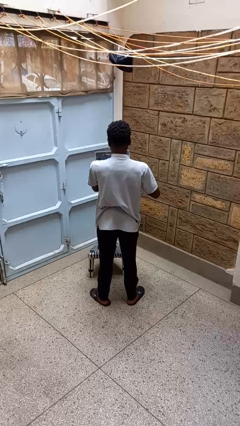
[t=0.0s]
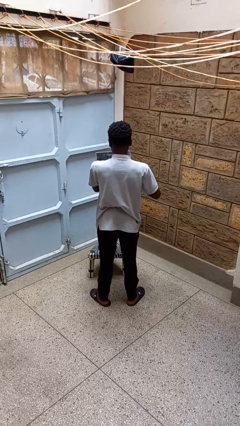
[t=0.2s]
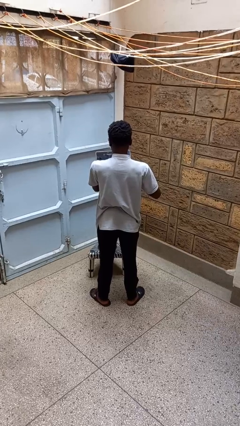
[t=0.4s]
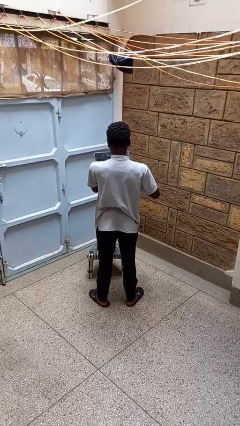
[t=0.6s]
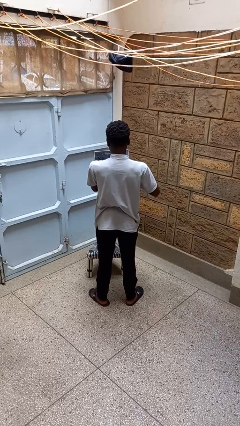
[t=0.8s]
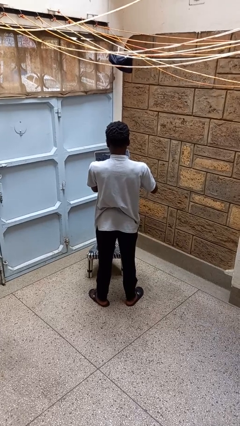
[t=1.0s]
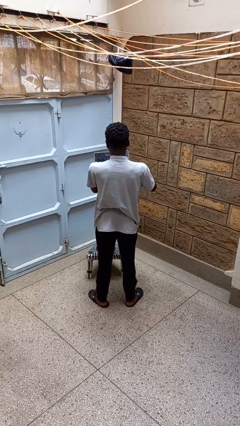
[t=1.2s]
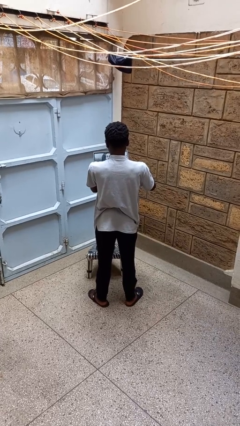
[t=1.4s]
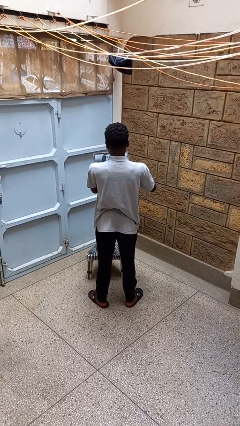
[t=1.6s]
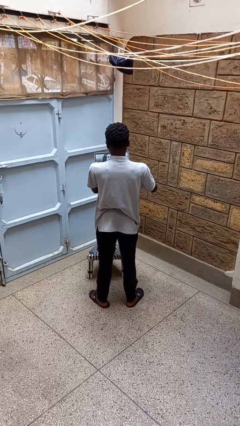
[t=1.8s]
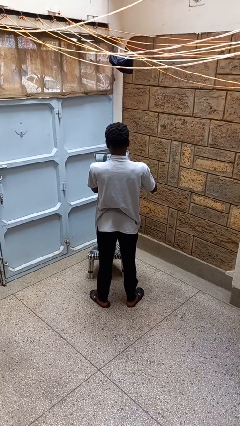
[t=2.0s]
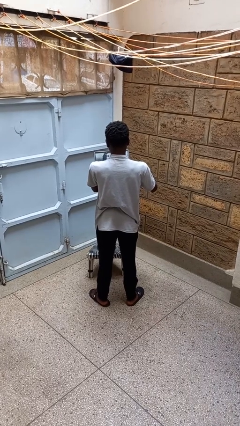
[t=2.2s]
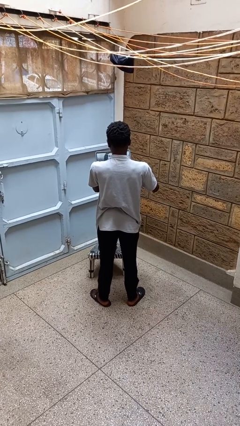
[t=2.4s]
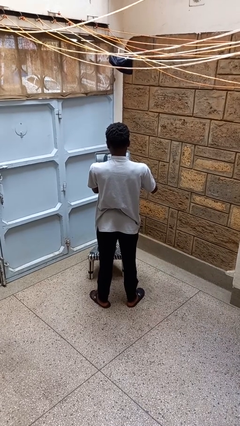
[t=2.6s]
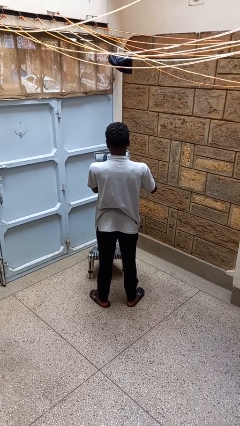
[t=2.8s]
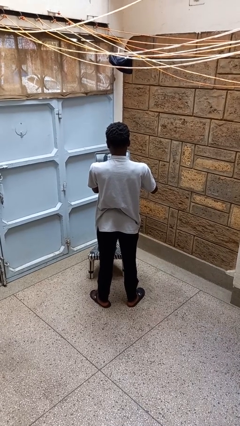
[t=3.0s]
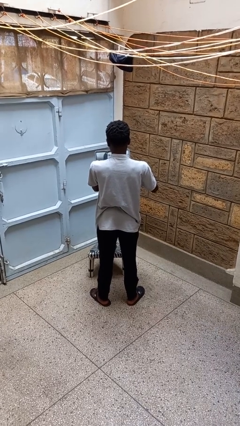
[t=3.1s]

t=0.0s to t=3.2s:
person interacts with tablet

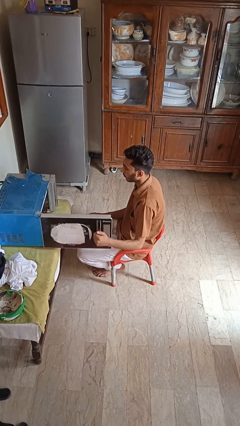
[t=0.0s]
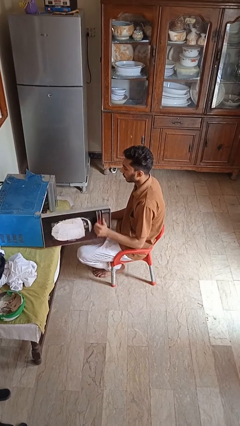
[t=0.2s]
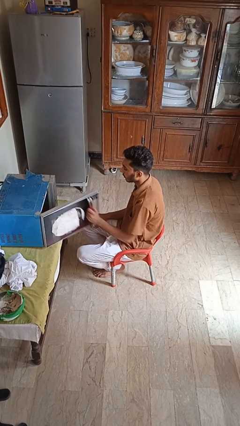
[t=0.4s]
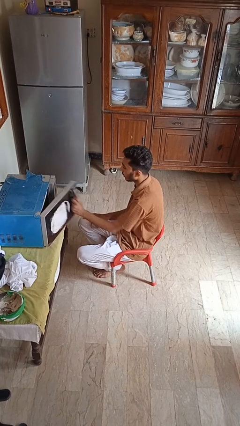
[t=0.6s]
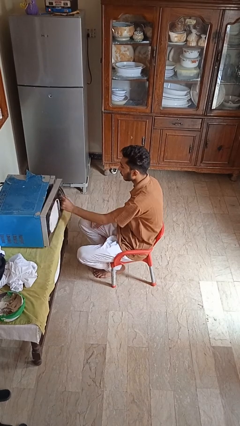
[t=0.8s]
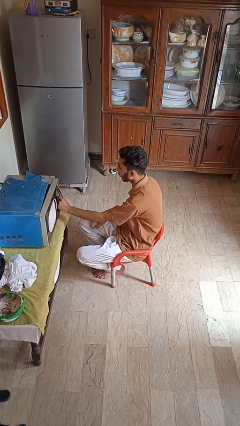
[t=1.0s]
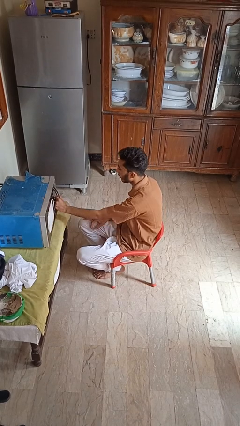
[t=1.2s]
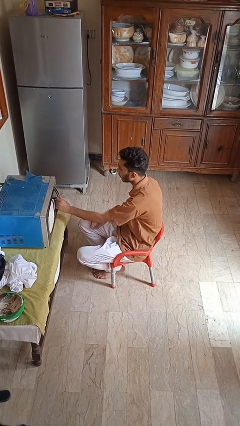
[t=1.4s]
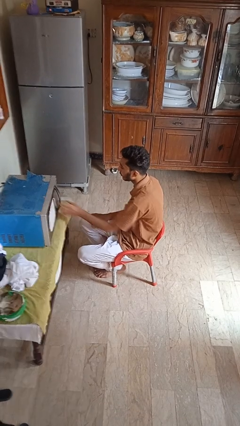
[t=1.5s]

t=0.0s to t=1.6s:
person closes microwave

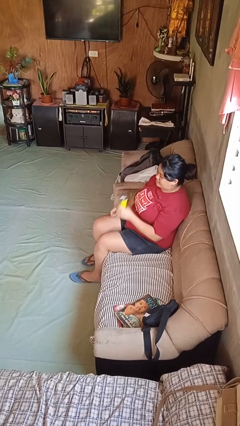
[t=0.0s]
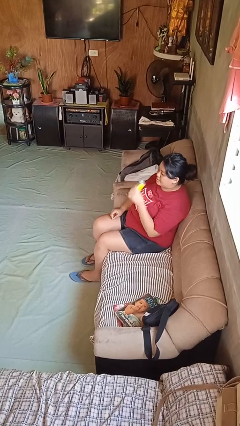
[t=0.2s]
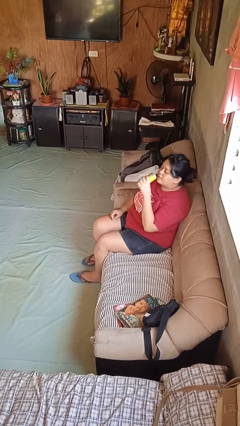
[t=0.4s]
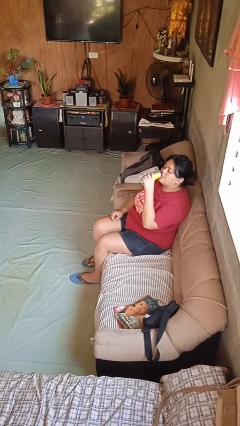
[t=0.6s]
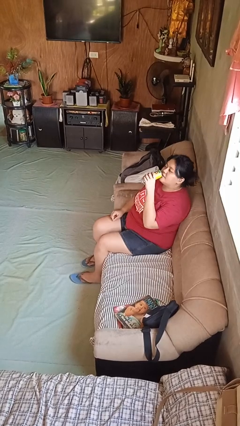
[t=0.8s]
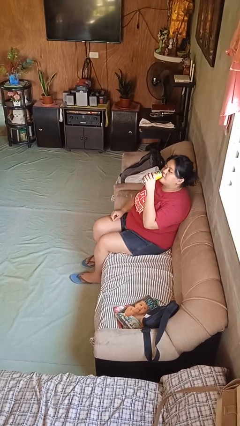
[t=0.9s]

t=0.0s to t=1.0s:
person drinks from beverage can

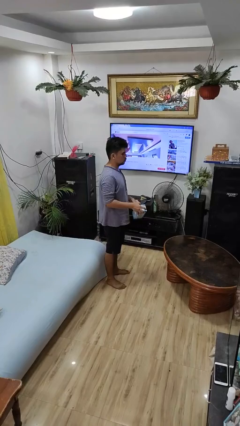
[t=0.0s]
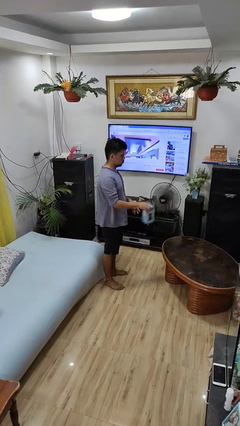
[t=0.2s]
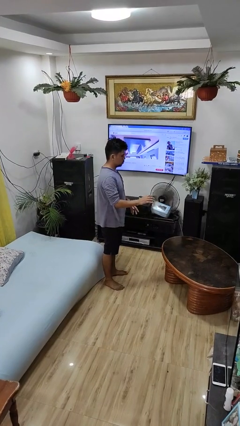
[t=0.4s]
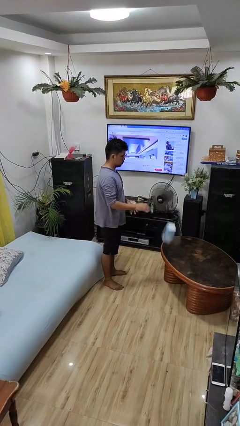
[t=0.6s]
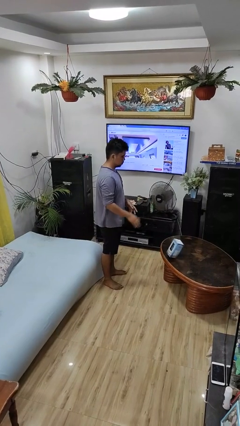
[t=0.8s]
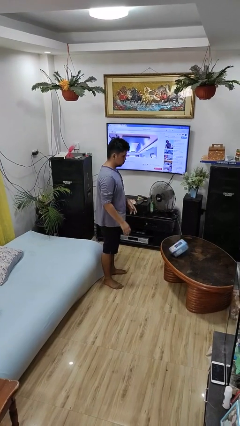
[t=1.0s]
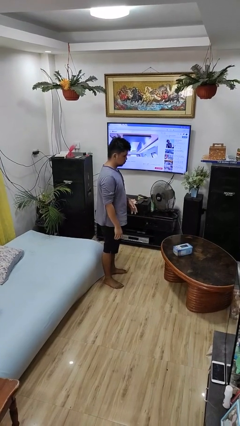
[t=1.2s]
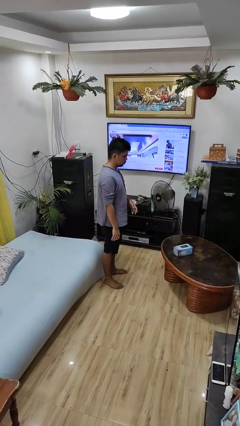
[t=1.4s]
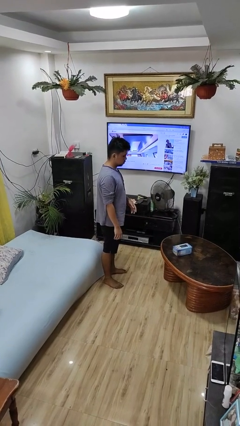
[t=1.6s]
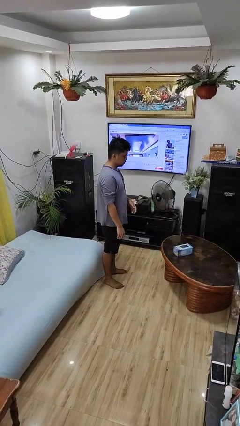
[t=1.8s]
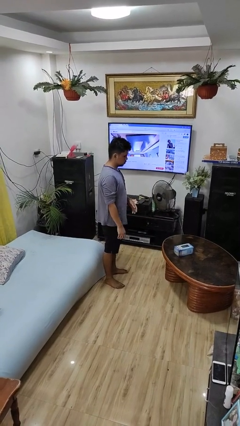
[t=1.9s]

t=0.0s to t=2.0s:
person throws object on table

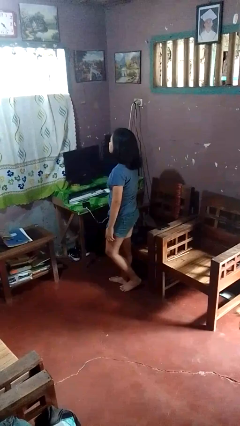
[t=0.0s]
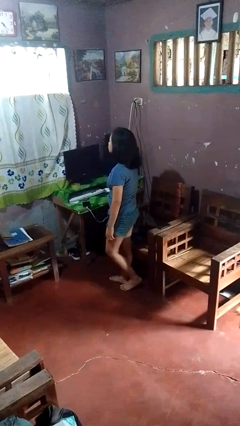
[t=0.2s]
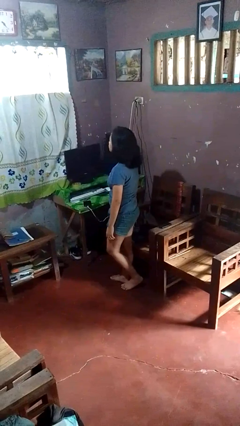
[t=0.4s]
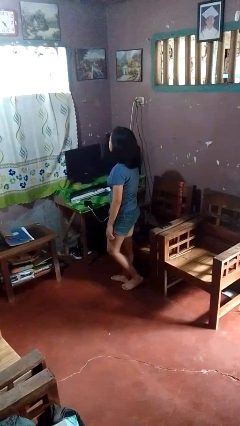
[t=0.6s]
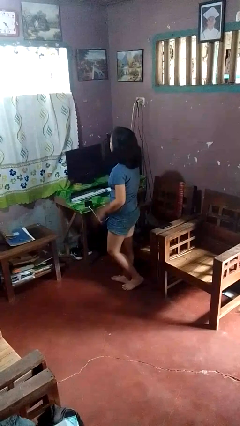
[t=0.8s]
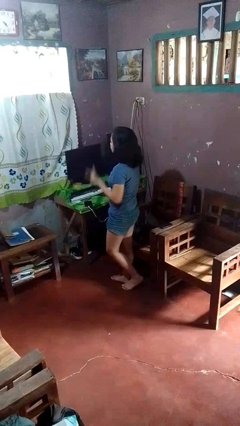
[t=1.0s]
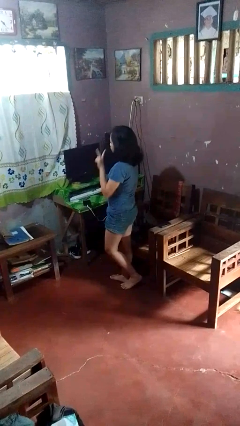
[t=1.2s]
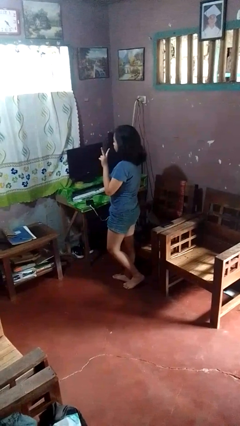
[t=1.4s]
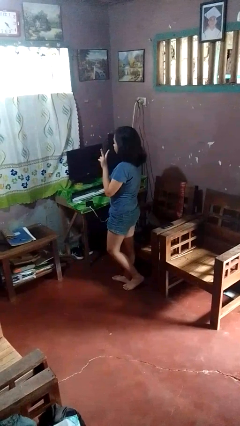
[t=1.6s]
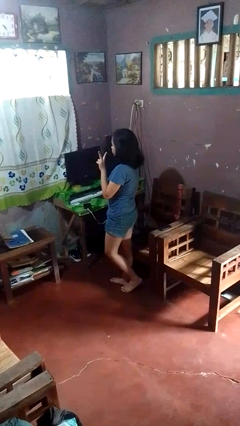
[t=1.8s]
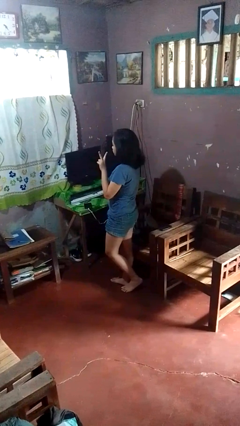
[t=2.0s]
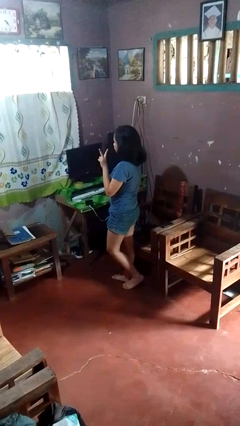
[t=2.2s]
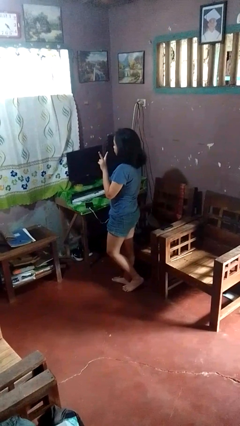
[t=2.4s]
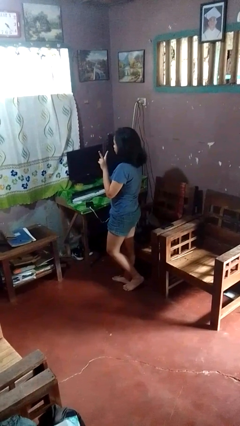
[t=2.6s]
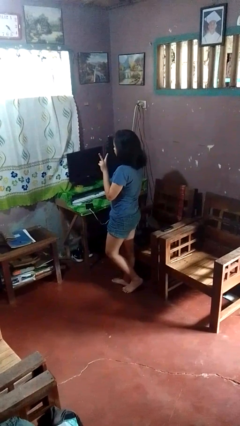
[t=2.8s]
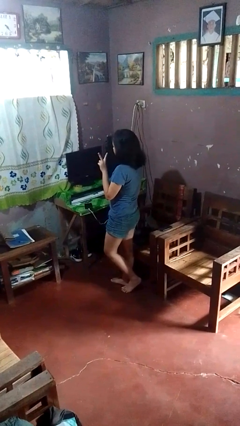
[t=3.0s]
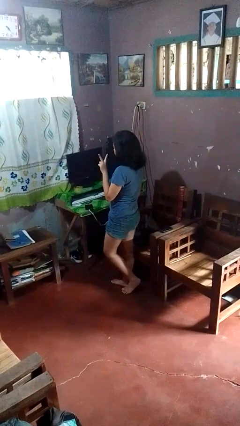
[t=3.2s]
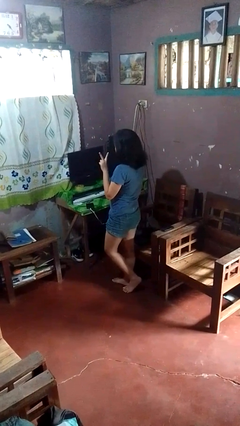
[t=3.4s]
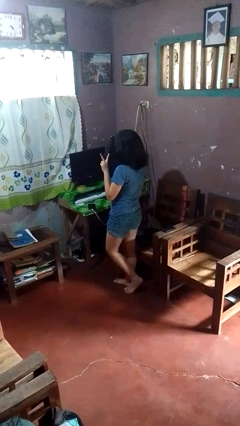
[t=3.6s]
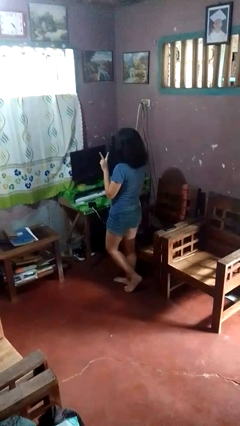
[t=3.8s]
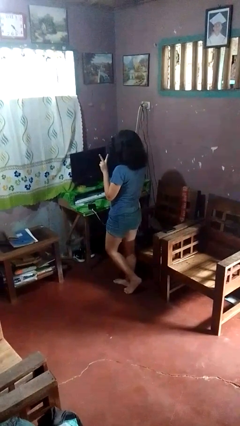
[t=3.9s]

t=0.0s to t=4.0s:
person gestures peace

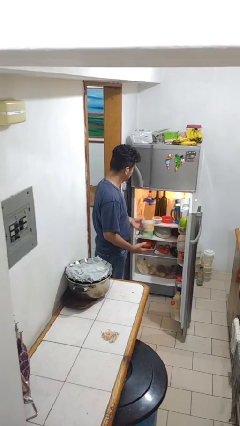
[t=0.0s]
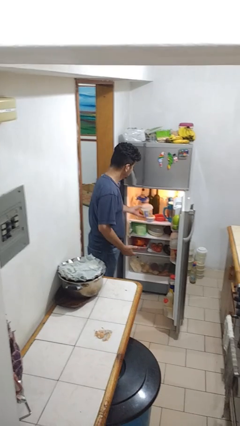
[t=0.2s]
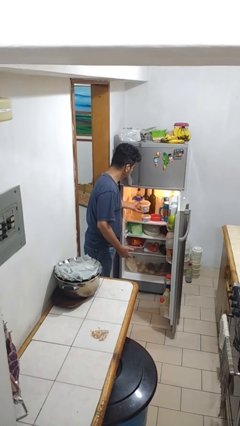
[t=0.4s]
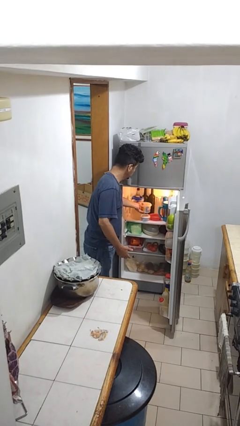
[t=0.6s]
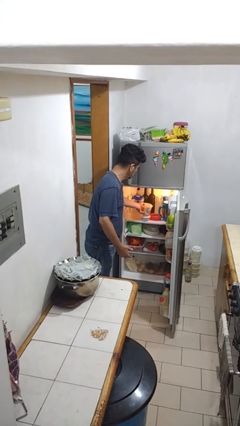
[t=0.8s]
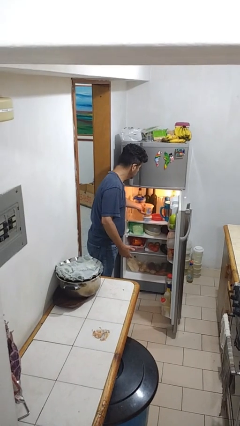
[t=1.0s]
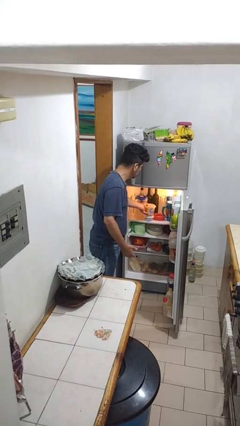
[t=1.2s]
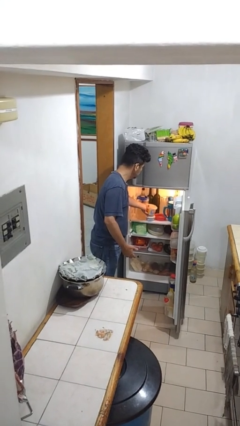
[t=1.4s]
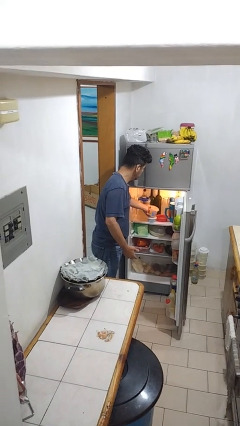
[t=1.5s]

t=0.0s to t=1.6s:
person puts object into refrigerator

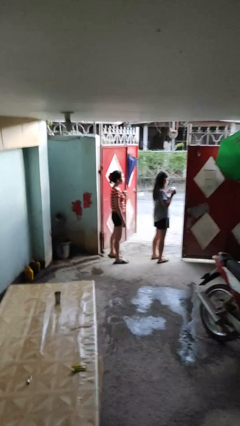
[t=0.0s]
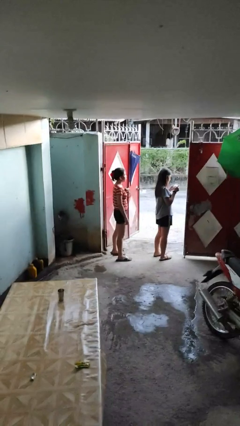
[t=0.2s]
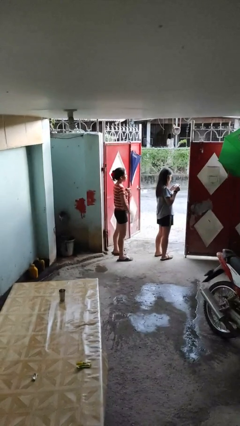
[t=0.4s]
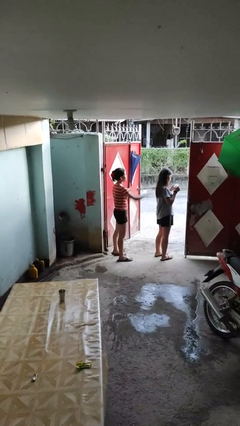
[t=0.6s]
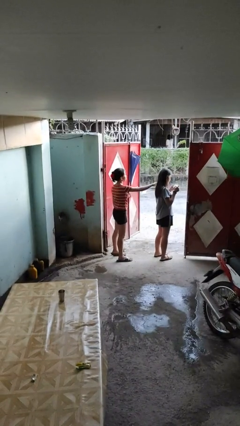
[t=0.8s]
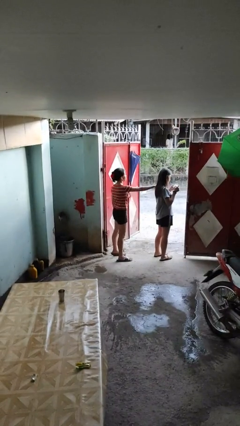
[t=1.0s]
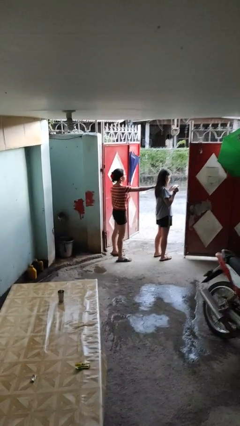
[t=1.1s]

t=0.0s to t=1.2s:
person grabs person by shoulder

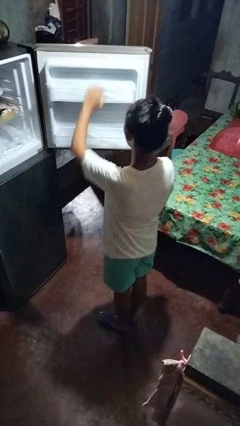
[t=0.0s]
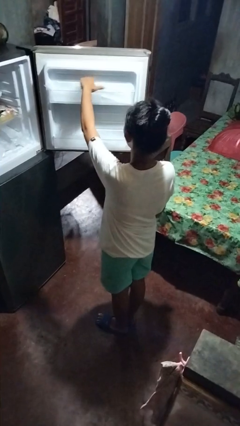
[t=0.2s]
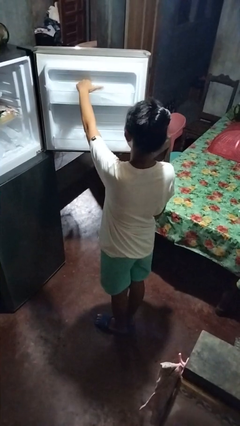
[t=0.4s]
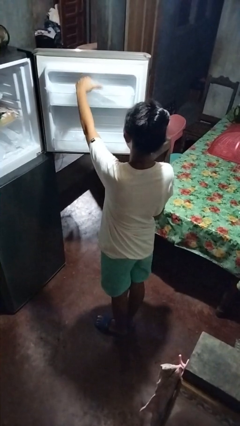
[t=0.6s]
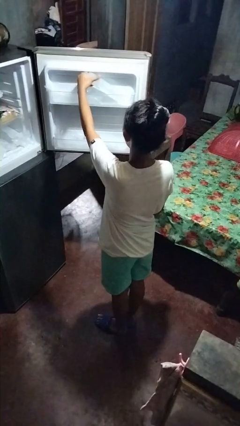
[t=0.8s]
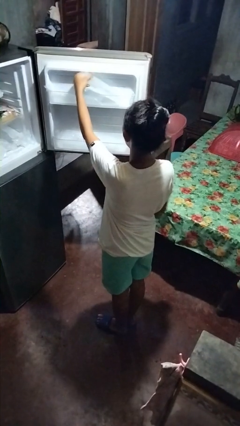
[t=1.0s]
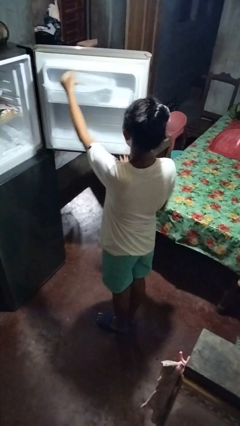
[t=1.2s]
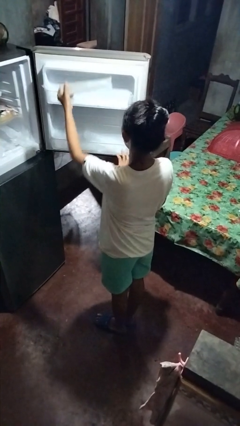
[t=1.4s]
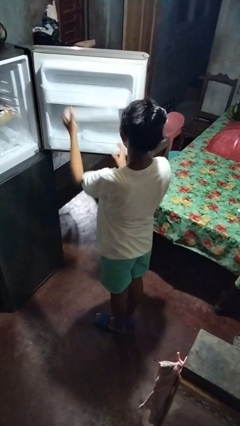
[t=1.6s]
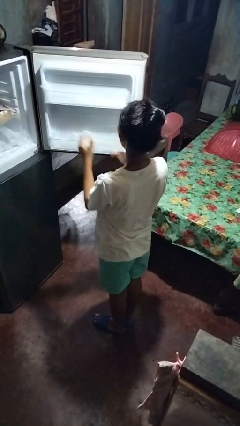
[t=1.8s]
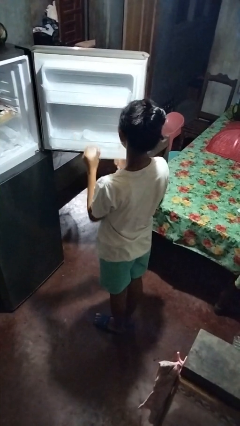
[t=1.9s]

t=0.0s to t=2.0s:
person takes object from refrigerator

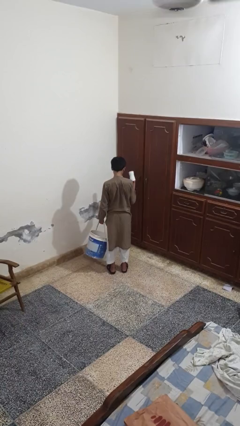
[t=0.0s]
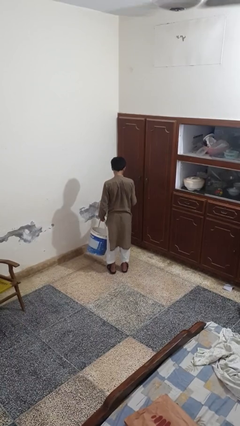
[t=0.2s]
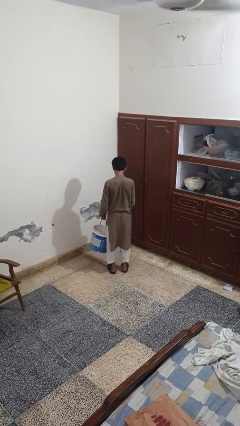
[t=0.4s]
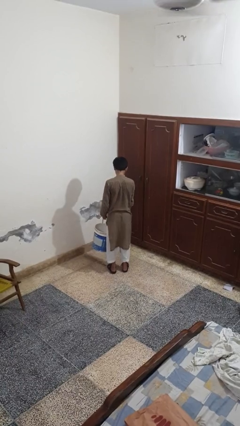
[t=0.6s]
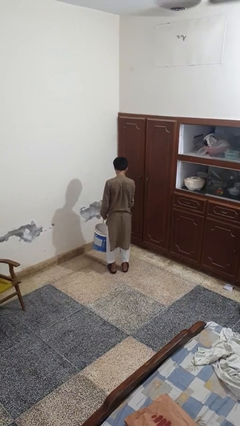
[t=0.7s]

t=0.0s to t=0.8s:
person puts object into basket
